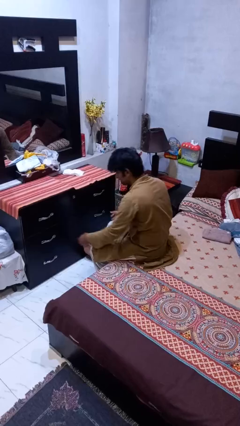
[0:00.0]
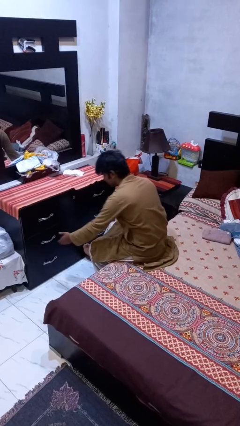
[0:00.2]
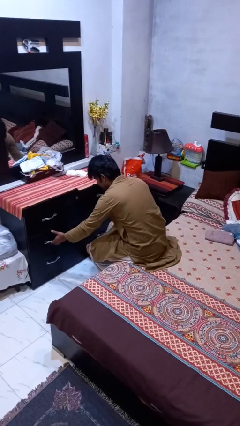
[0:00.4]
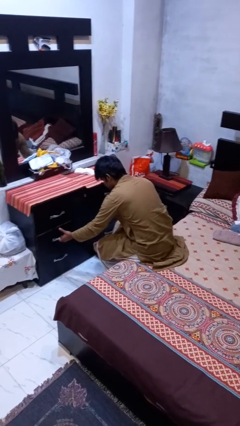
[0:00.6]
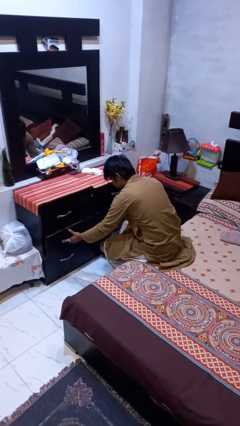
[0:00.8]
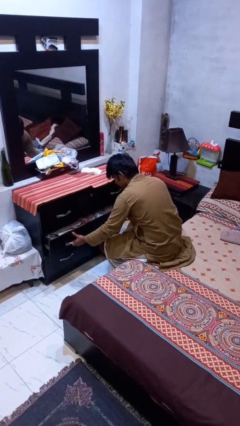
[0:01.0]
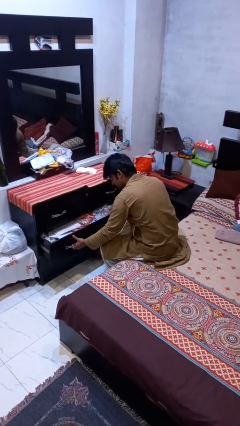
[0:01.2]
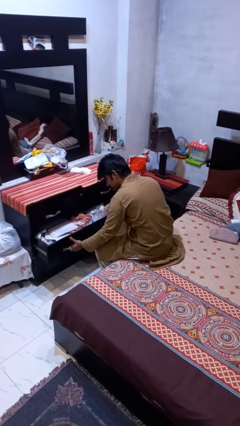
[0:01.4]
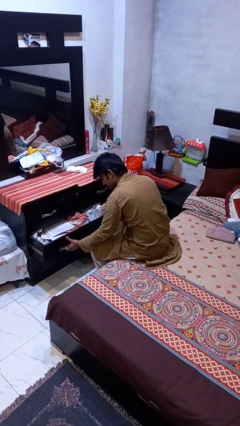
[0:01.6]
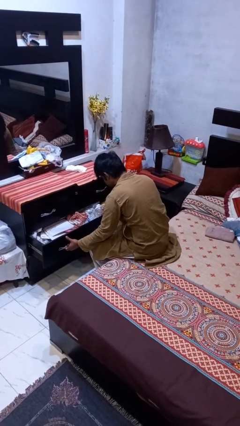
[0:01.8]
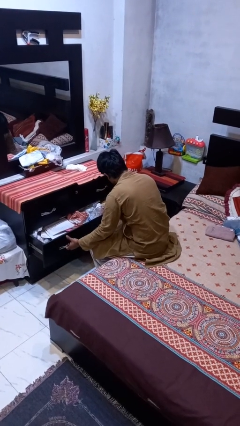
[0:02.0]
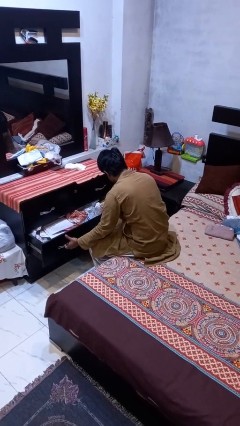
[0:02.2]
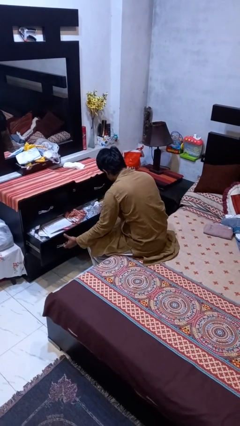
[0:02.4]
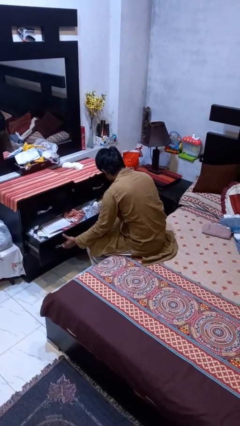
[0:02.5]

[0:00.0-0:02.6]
person opens dresser drawer

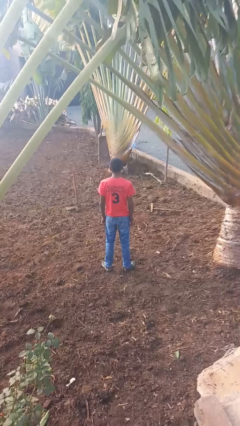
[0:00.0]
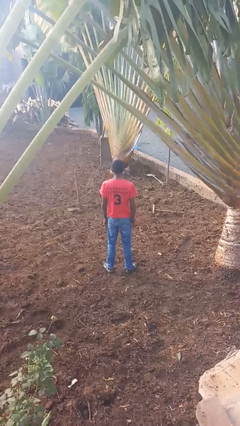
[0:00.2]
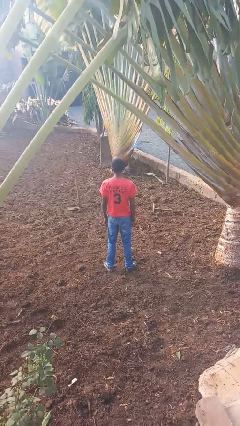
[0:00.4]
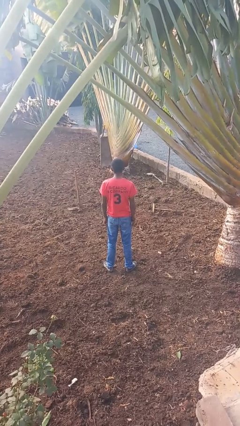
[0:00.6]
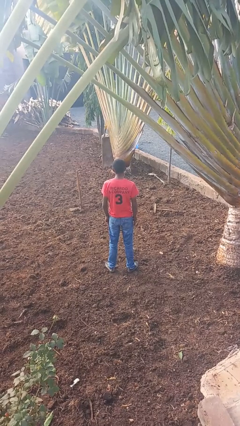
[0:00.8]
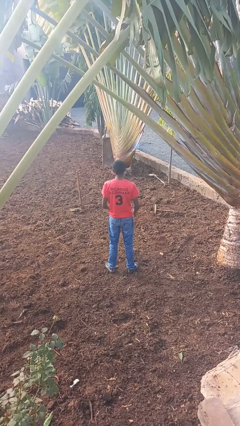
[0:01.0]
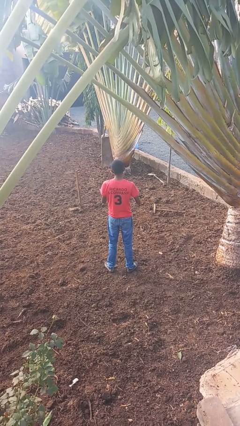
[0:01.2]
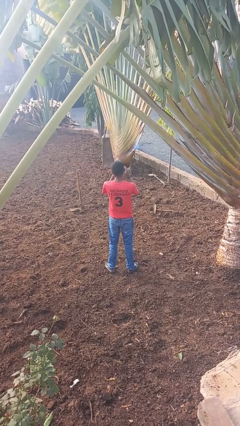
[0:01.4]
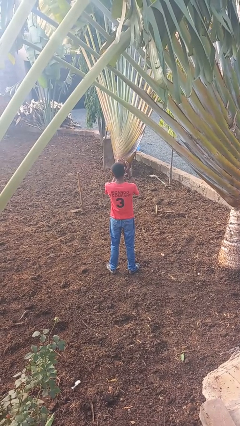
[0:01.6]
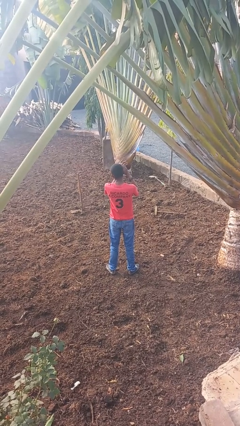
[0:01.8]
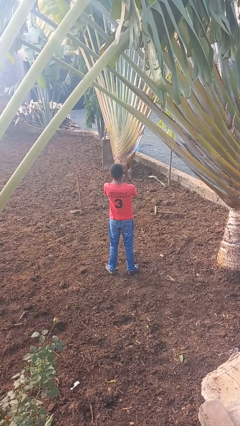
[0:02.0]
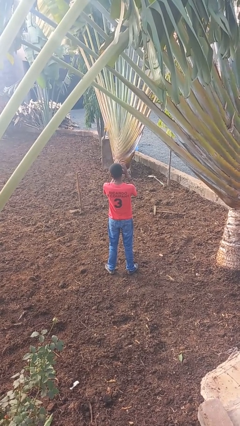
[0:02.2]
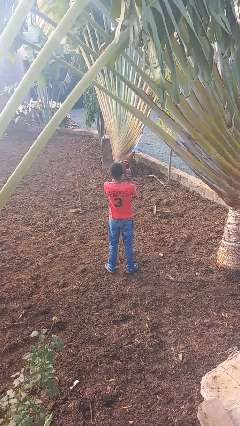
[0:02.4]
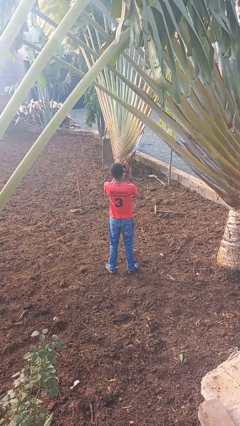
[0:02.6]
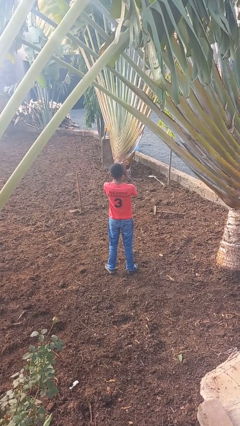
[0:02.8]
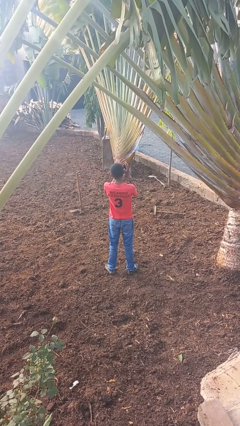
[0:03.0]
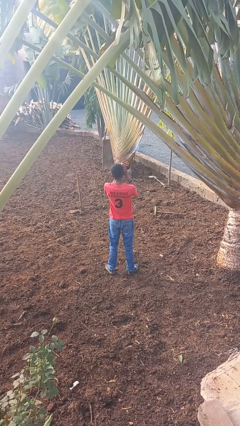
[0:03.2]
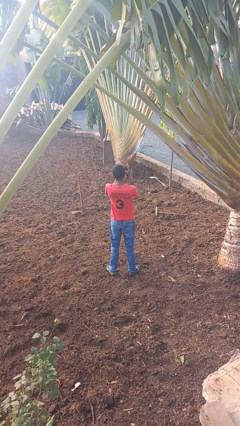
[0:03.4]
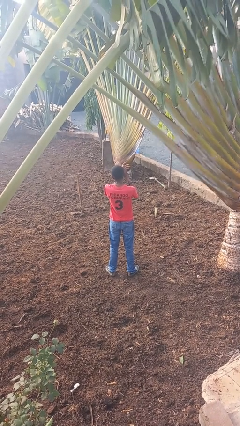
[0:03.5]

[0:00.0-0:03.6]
person claps hands

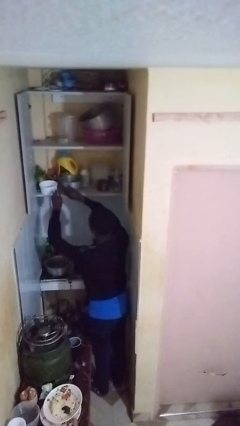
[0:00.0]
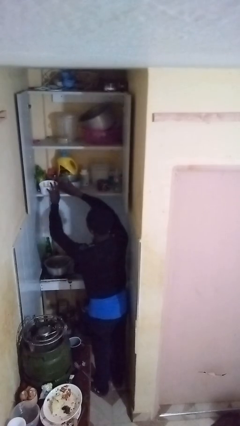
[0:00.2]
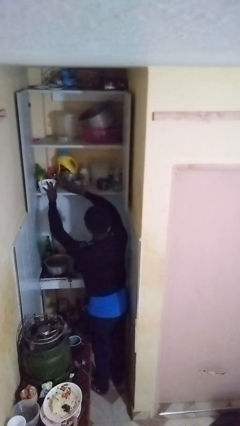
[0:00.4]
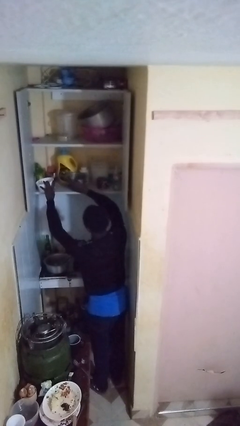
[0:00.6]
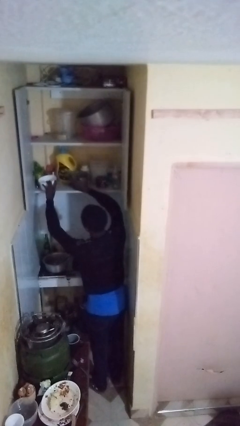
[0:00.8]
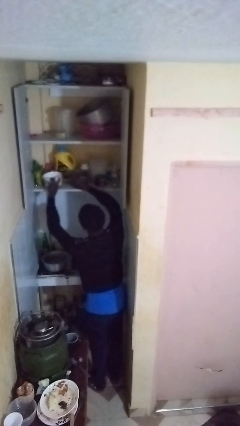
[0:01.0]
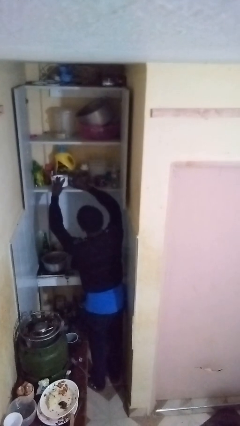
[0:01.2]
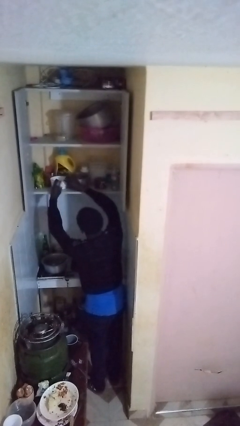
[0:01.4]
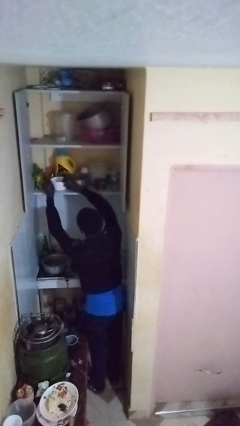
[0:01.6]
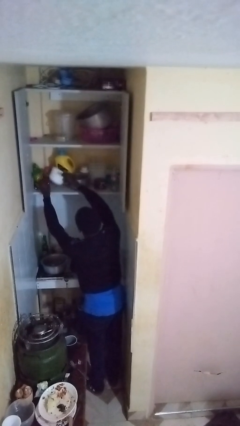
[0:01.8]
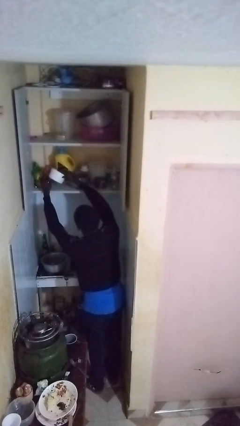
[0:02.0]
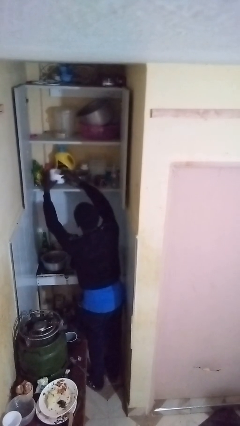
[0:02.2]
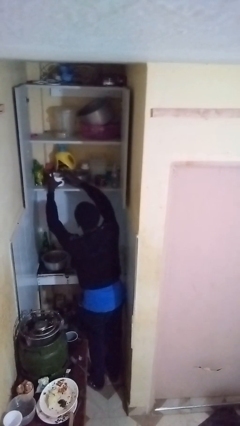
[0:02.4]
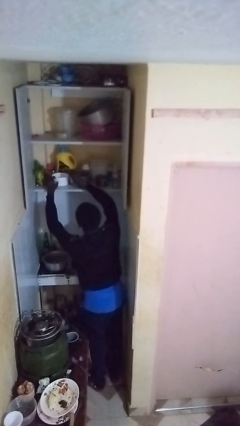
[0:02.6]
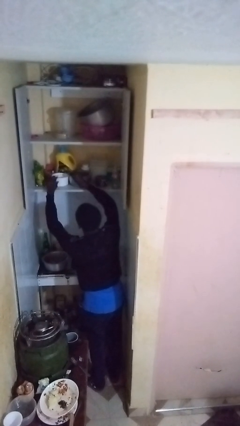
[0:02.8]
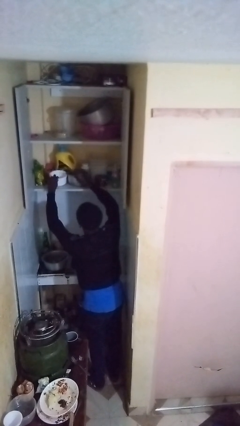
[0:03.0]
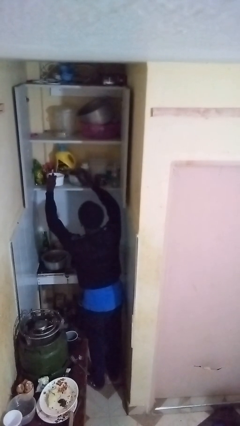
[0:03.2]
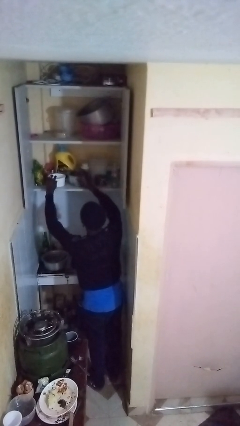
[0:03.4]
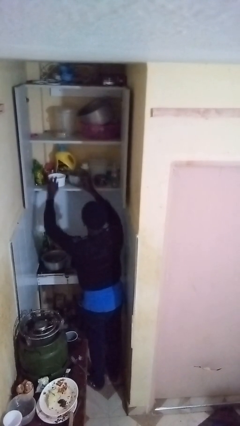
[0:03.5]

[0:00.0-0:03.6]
person searches in kitchen drawer

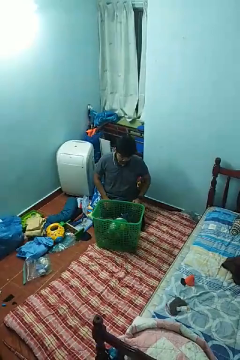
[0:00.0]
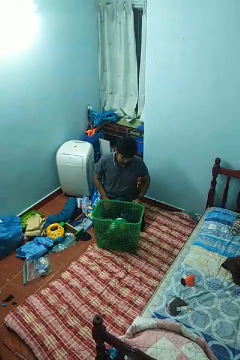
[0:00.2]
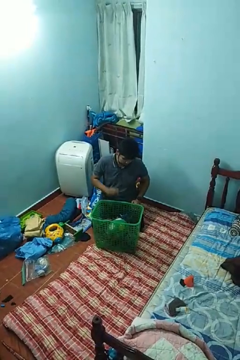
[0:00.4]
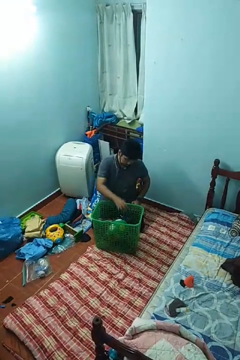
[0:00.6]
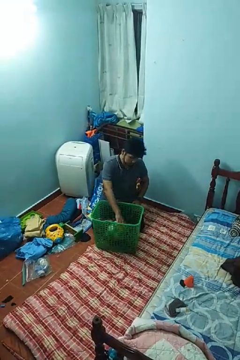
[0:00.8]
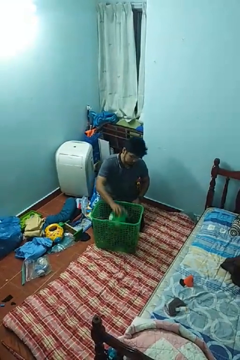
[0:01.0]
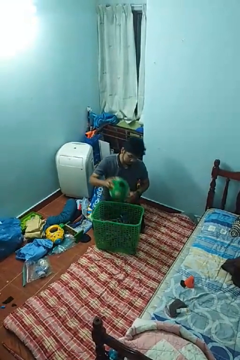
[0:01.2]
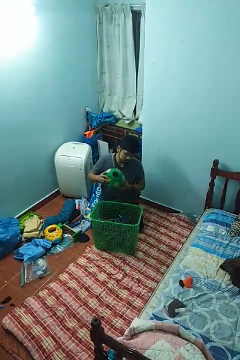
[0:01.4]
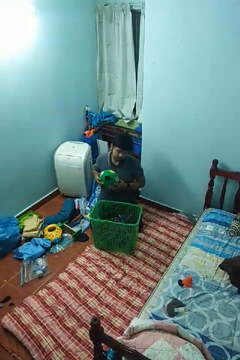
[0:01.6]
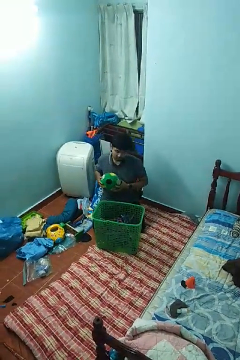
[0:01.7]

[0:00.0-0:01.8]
person takes object from basket

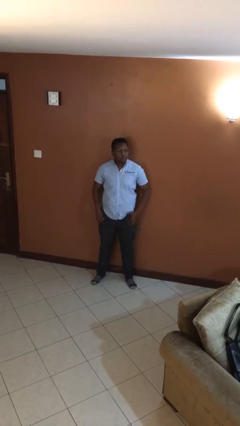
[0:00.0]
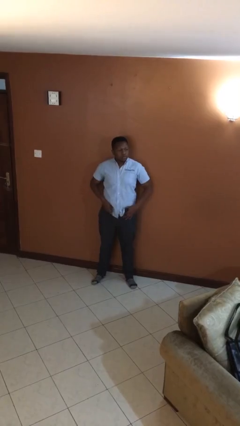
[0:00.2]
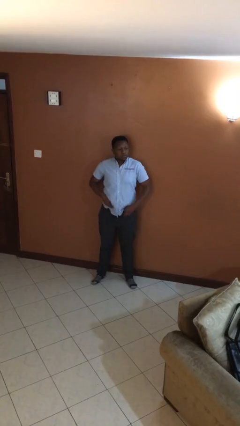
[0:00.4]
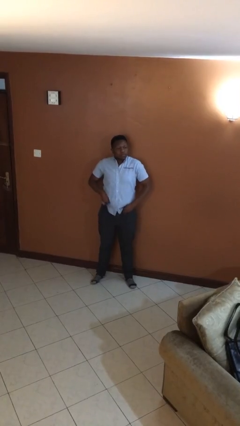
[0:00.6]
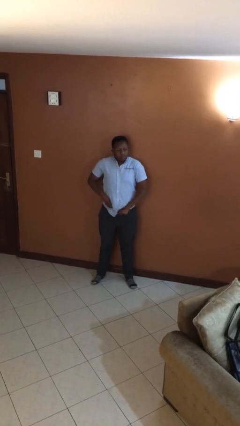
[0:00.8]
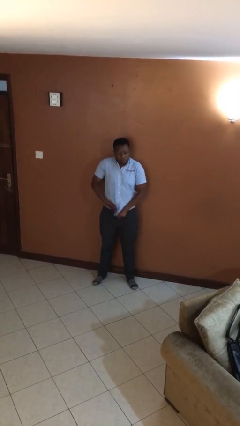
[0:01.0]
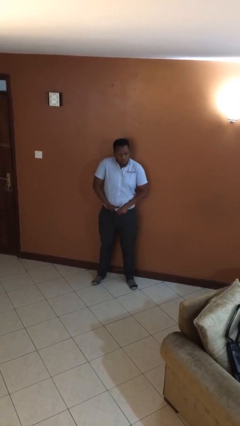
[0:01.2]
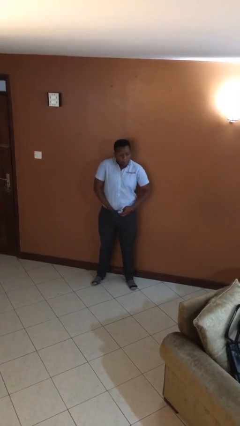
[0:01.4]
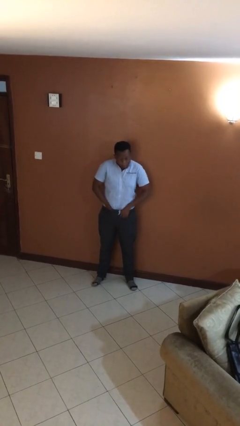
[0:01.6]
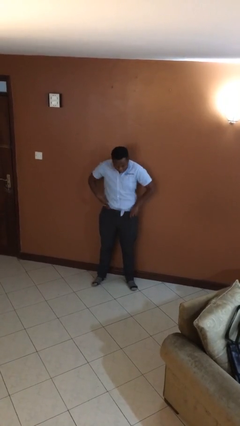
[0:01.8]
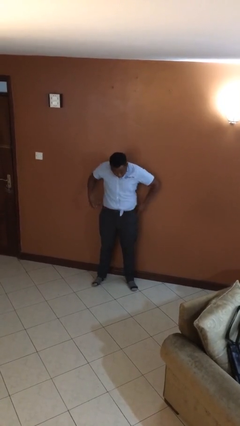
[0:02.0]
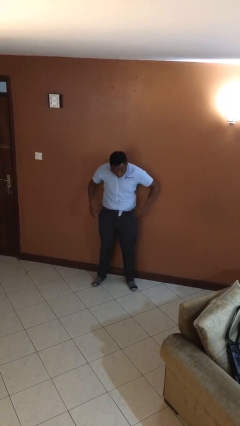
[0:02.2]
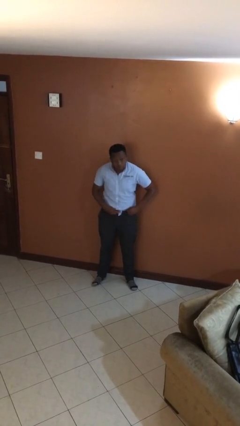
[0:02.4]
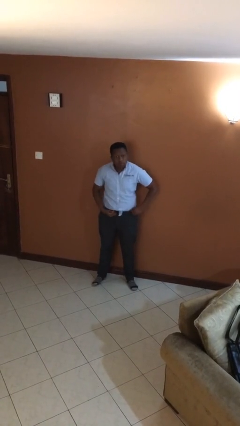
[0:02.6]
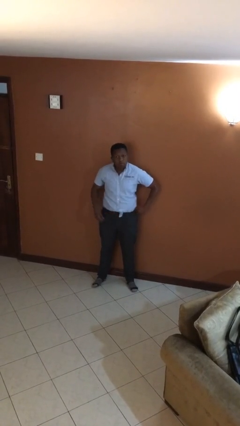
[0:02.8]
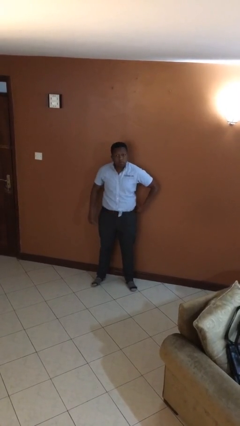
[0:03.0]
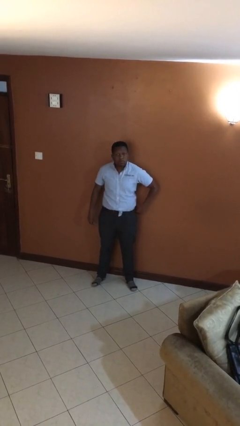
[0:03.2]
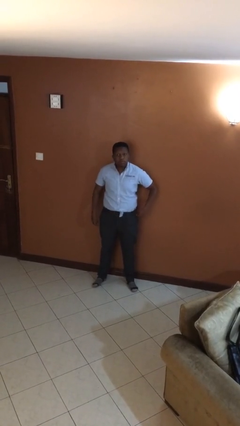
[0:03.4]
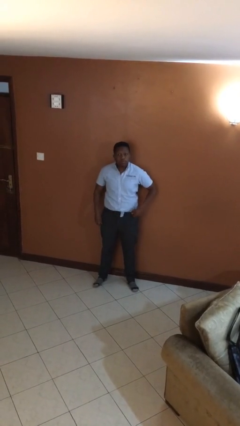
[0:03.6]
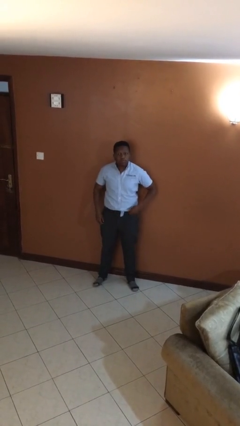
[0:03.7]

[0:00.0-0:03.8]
person tucks in shirt

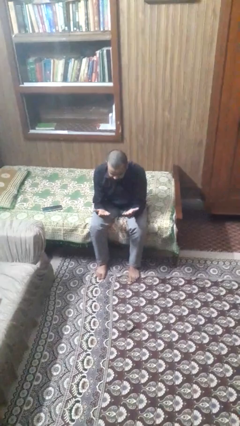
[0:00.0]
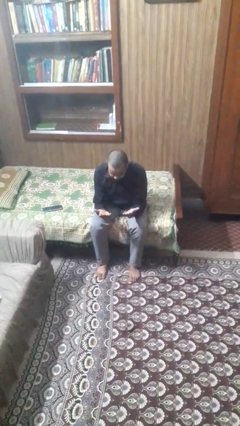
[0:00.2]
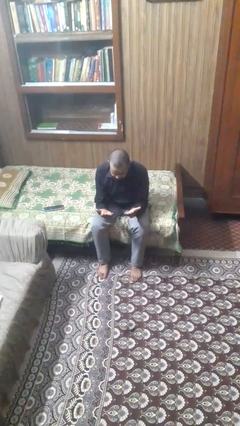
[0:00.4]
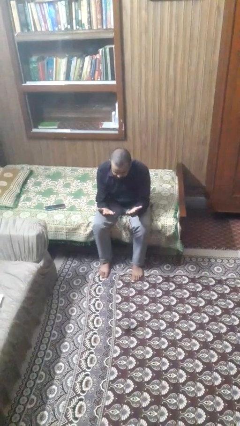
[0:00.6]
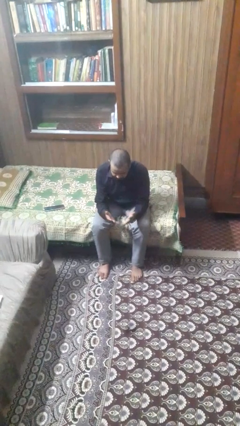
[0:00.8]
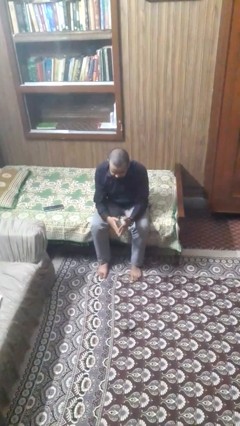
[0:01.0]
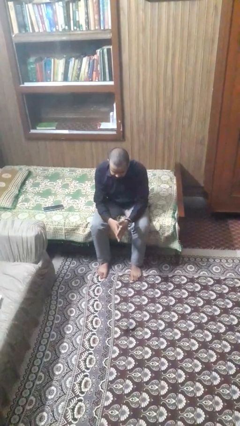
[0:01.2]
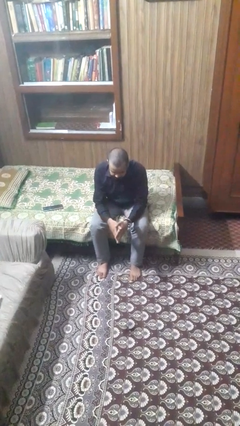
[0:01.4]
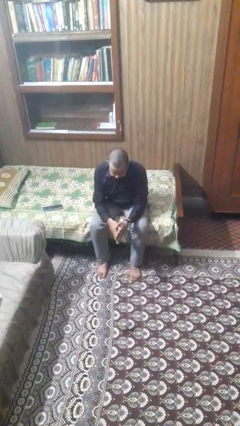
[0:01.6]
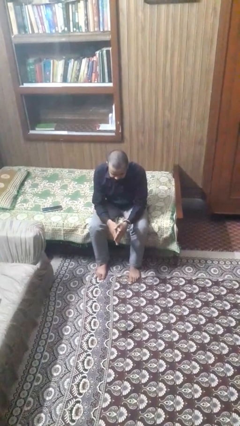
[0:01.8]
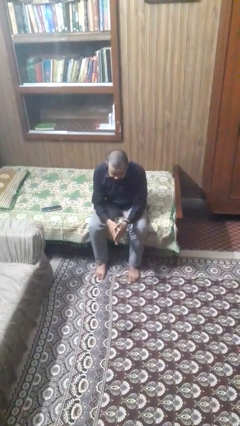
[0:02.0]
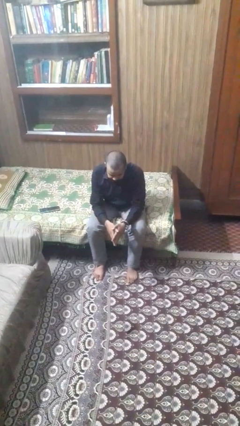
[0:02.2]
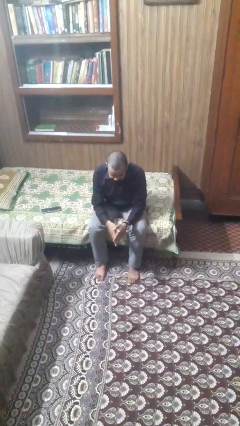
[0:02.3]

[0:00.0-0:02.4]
person looks at hands in lap
